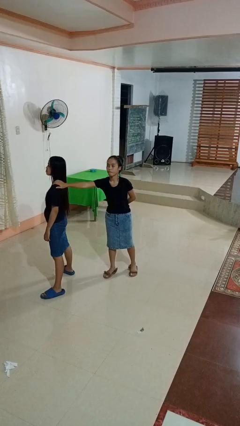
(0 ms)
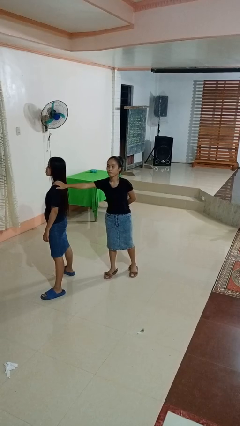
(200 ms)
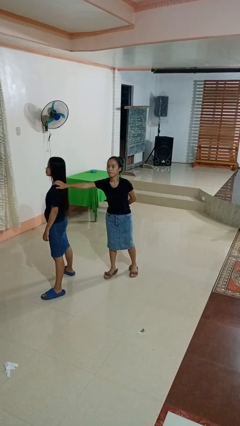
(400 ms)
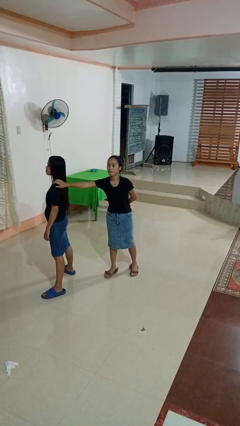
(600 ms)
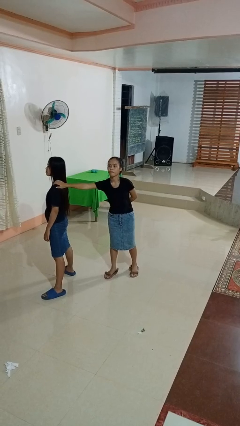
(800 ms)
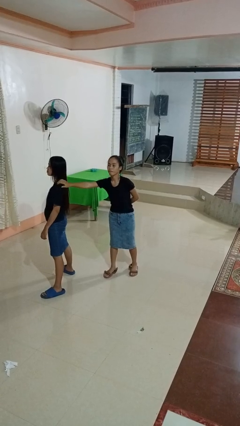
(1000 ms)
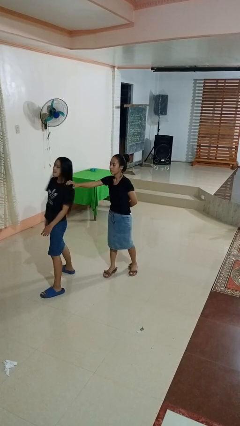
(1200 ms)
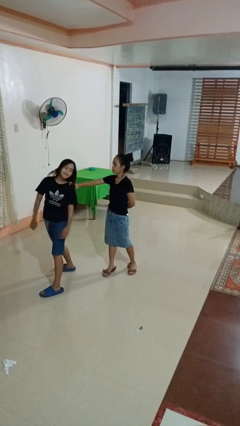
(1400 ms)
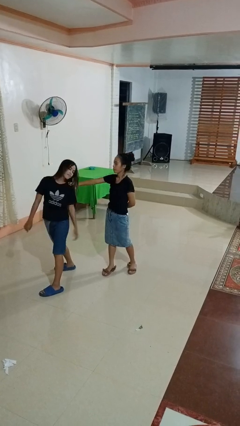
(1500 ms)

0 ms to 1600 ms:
person grabs person by shoulder

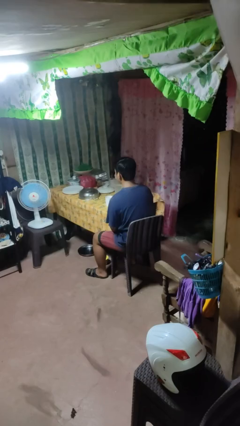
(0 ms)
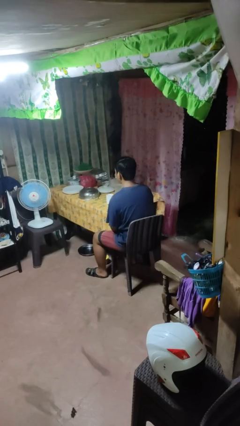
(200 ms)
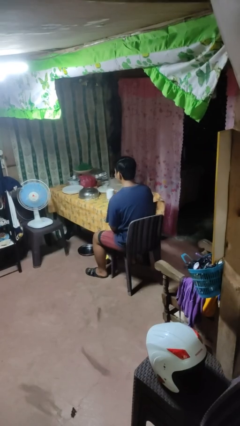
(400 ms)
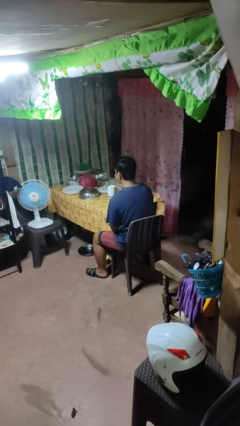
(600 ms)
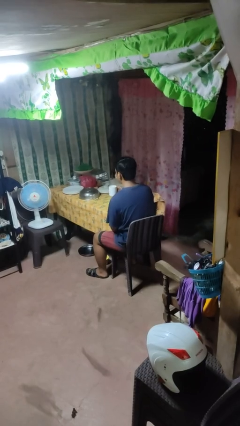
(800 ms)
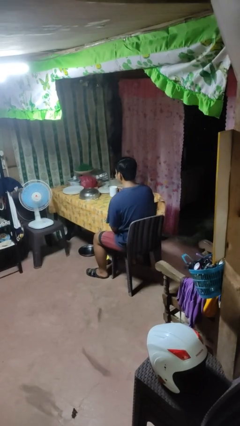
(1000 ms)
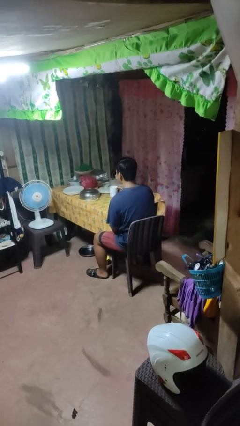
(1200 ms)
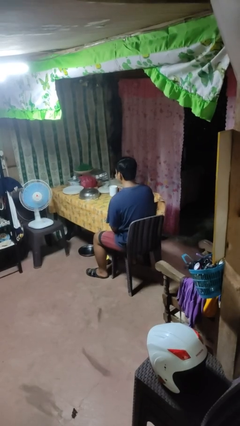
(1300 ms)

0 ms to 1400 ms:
person picks up object from table

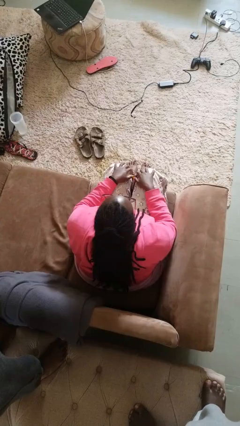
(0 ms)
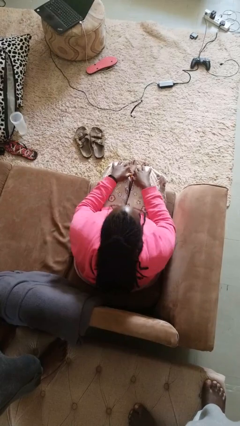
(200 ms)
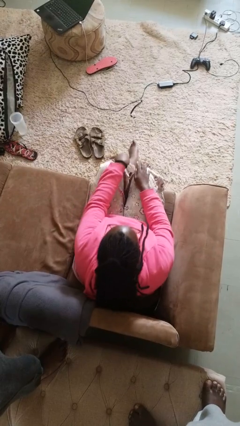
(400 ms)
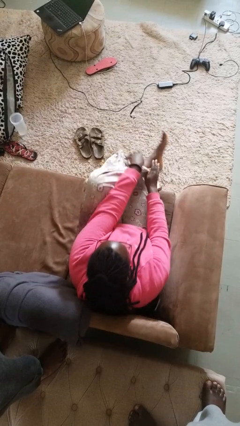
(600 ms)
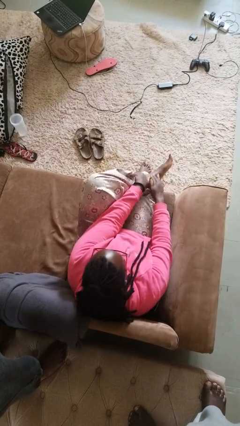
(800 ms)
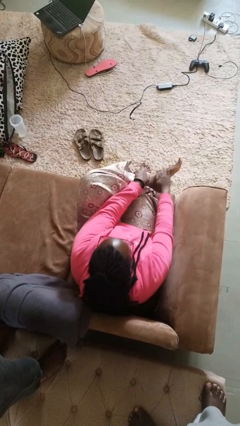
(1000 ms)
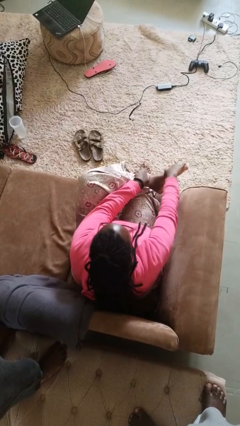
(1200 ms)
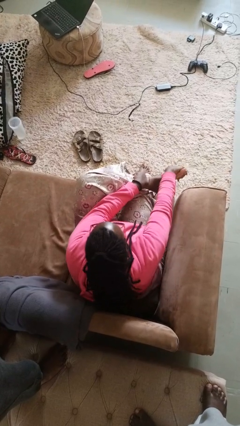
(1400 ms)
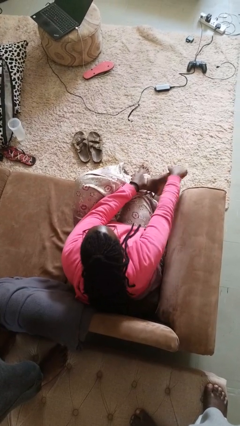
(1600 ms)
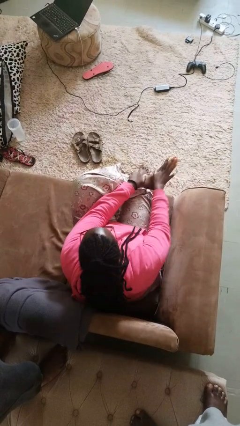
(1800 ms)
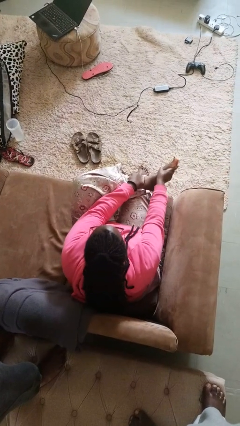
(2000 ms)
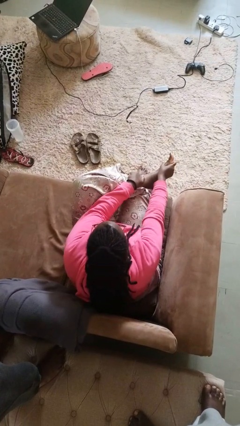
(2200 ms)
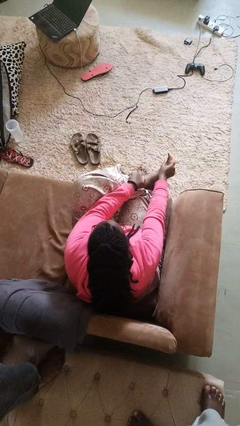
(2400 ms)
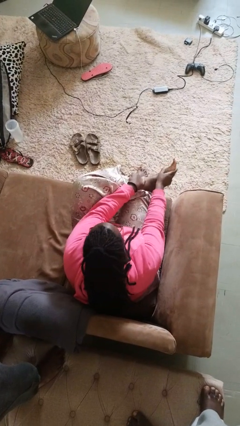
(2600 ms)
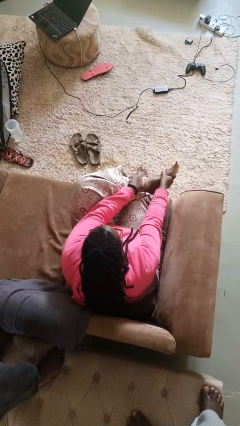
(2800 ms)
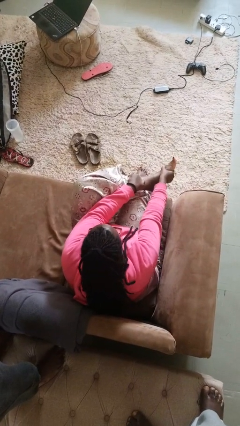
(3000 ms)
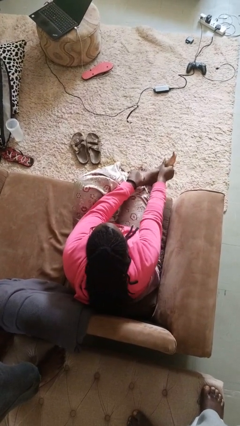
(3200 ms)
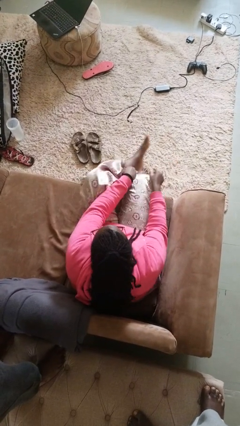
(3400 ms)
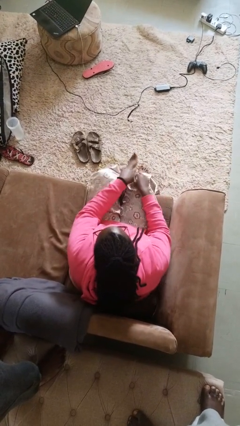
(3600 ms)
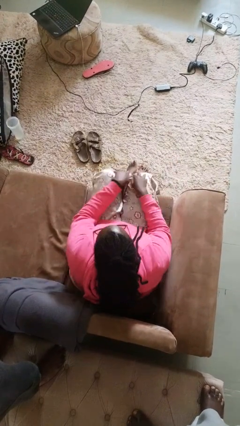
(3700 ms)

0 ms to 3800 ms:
person rubs foot

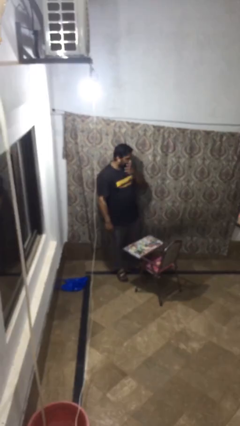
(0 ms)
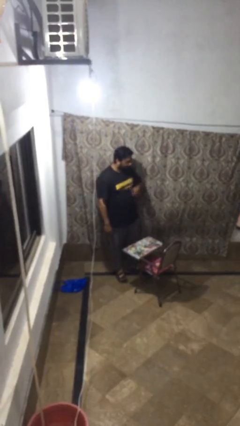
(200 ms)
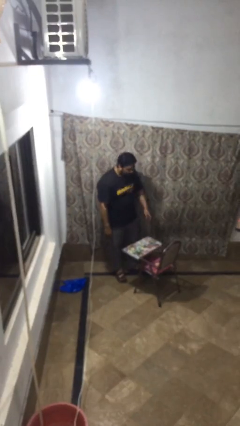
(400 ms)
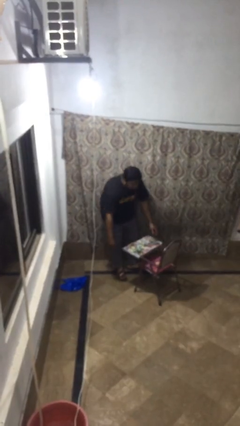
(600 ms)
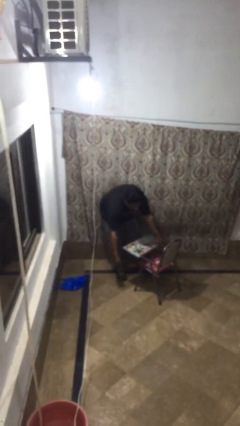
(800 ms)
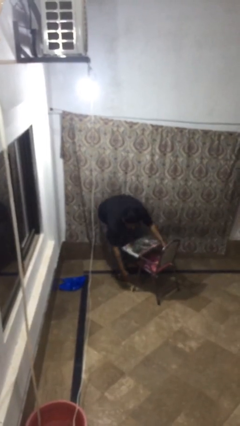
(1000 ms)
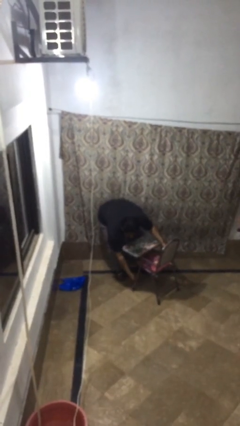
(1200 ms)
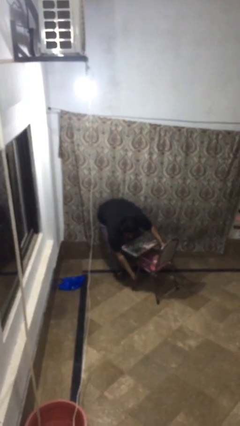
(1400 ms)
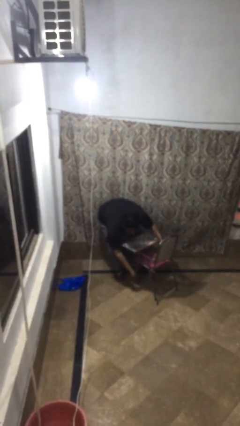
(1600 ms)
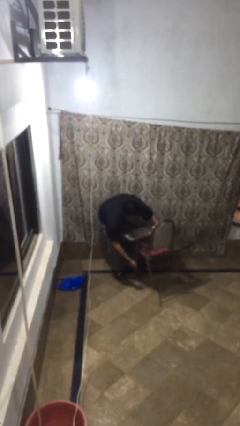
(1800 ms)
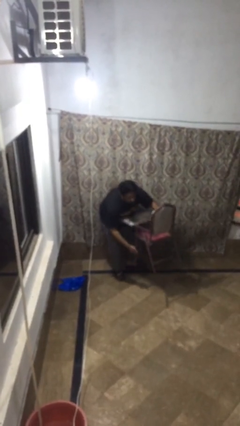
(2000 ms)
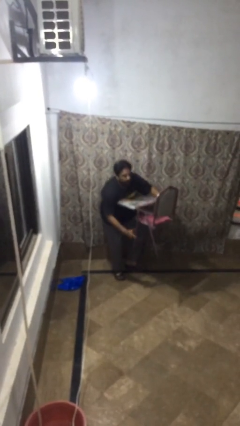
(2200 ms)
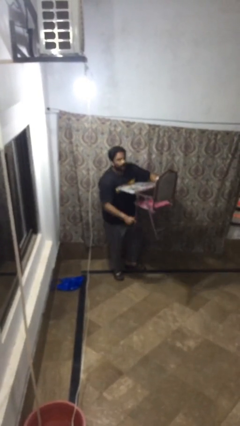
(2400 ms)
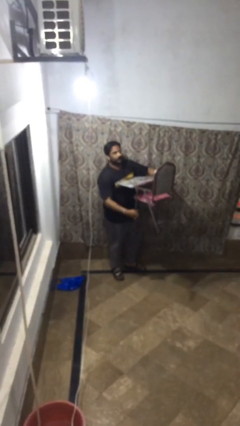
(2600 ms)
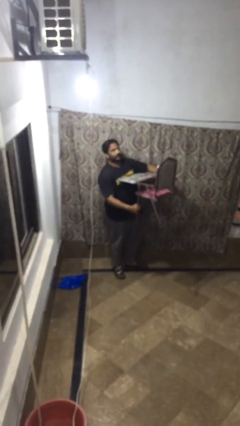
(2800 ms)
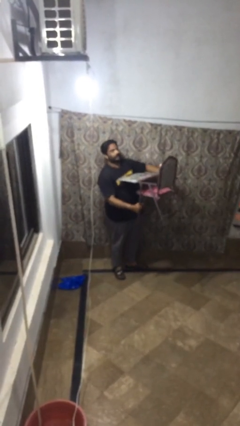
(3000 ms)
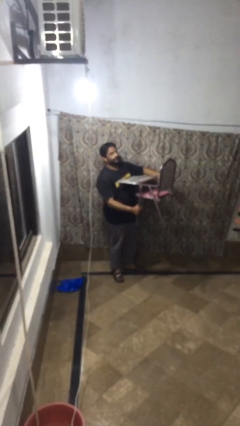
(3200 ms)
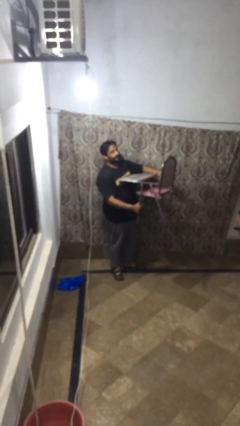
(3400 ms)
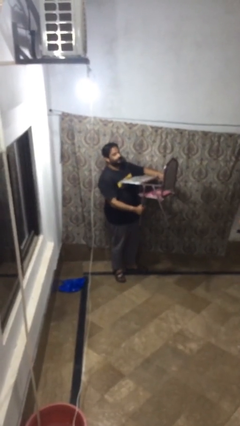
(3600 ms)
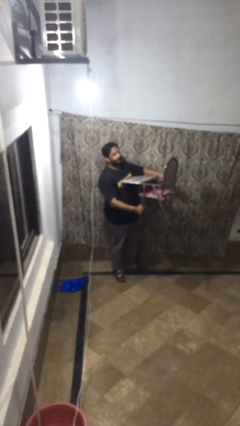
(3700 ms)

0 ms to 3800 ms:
person picks up object from floor

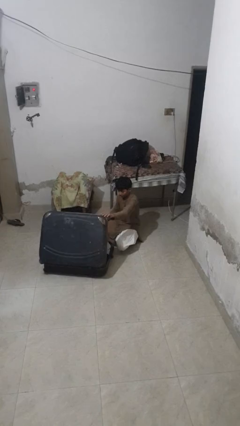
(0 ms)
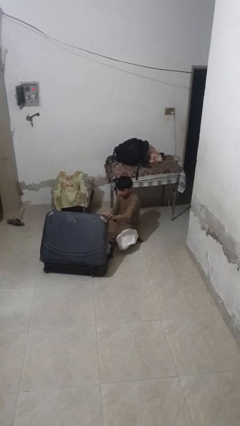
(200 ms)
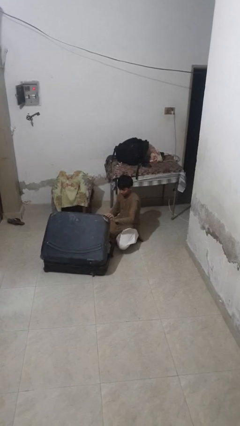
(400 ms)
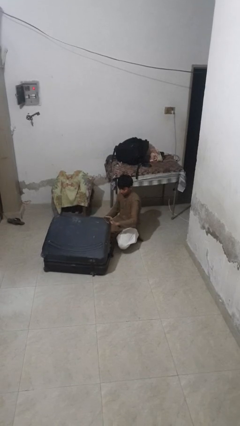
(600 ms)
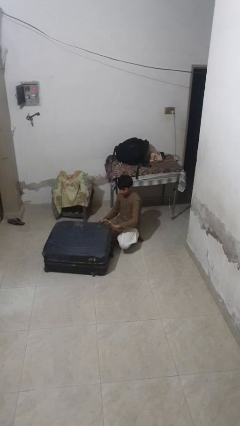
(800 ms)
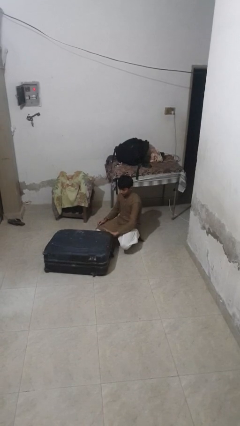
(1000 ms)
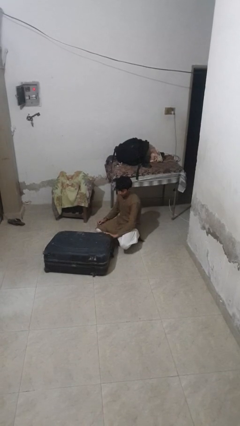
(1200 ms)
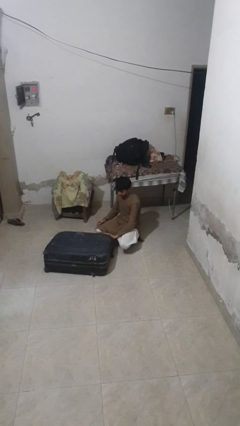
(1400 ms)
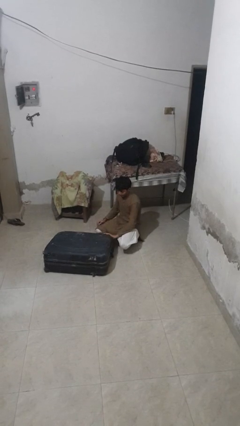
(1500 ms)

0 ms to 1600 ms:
person closes suitcase

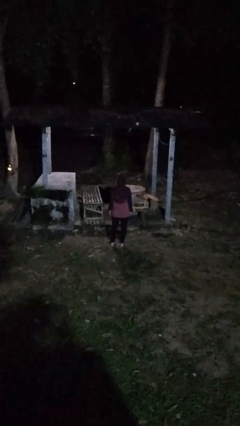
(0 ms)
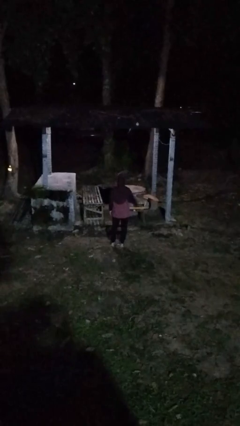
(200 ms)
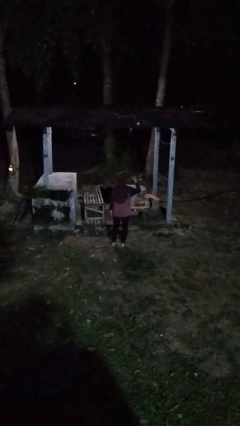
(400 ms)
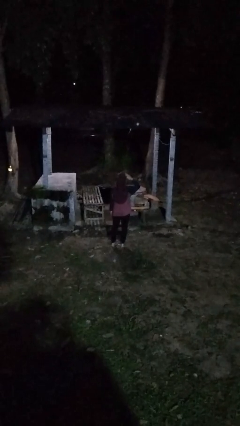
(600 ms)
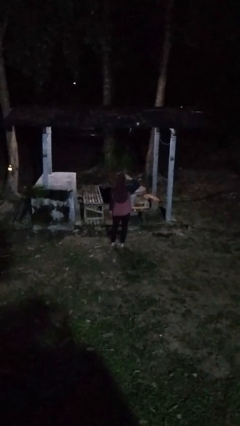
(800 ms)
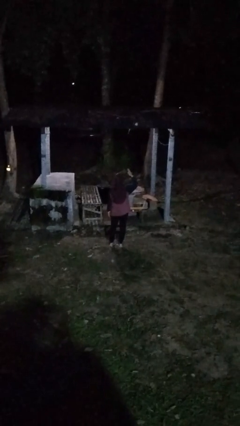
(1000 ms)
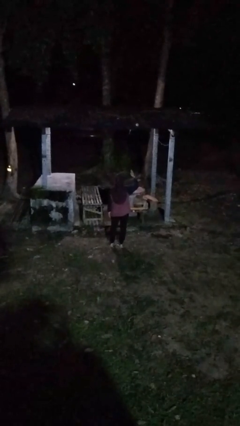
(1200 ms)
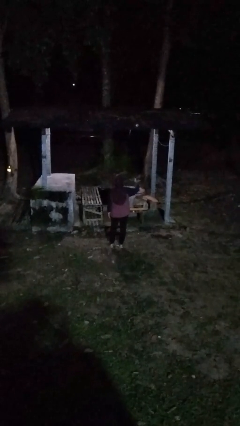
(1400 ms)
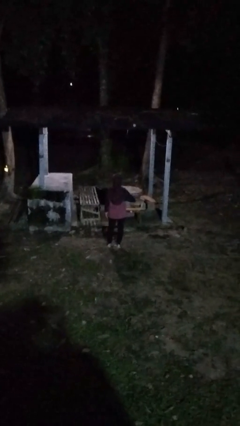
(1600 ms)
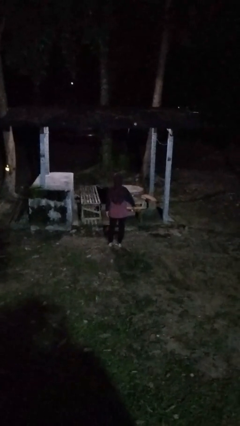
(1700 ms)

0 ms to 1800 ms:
person salutes

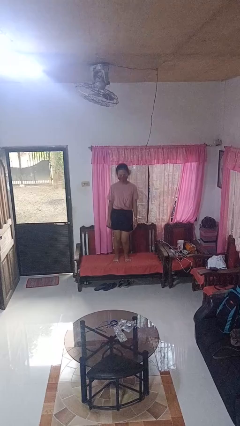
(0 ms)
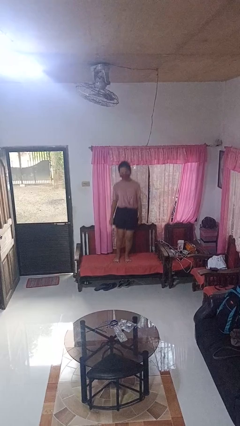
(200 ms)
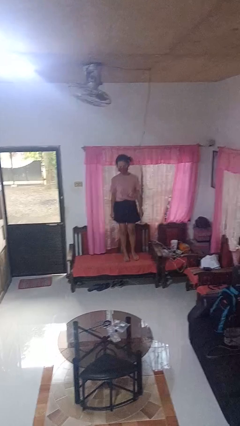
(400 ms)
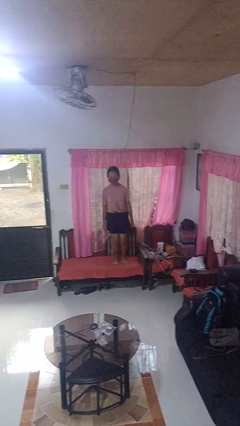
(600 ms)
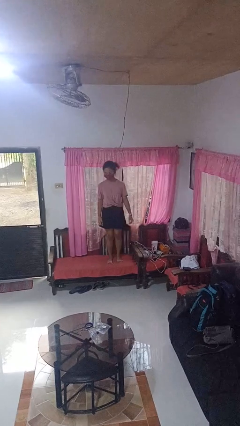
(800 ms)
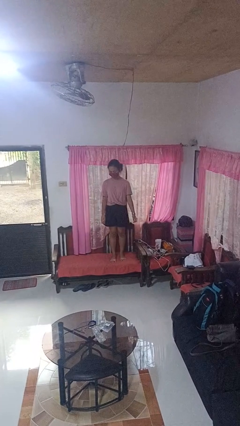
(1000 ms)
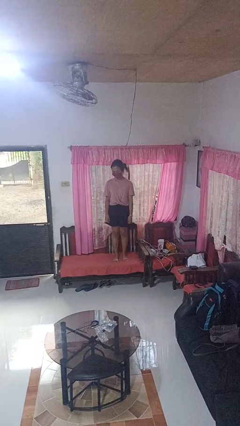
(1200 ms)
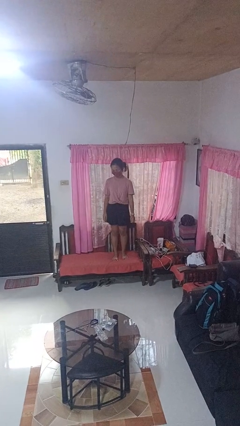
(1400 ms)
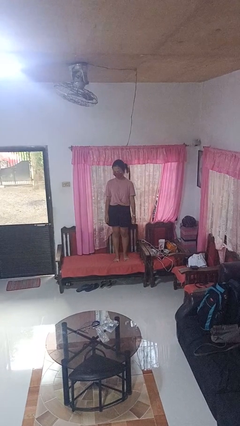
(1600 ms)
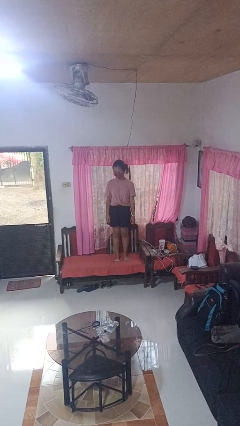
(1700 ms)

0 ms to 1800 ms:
person jumps on couch

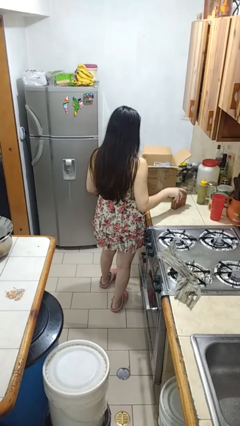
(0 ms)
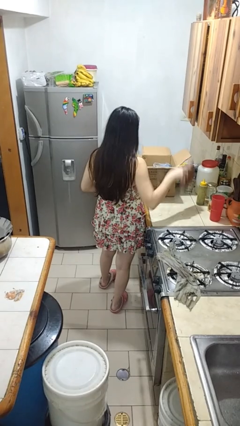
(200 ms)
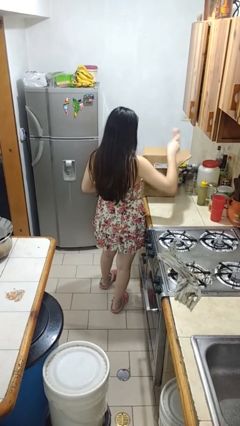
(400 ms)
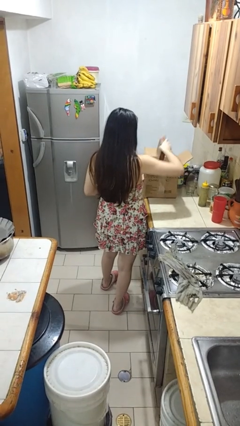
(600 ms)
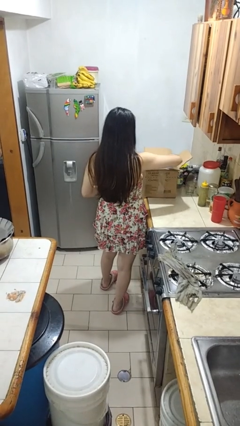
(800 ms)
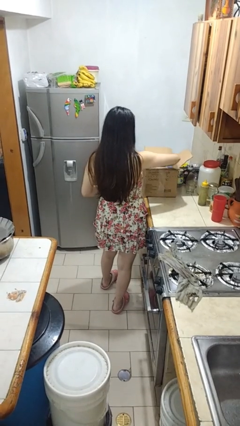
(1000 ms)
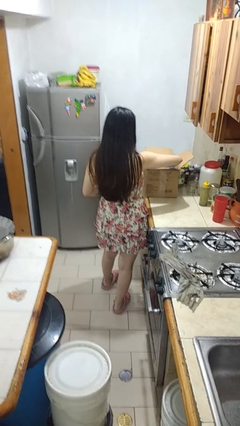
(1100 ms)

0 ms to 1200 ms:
person puts object into box
